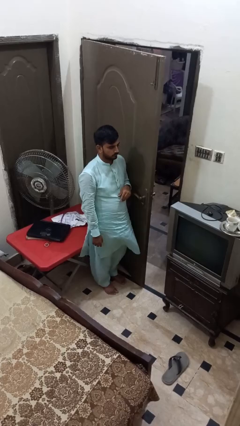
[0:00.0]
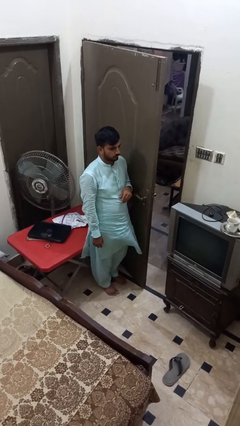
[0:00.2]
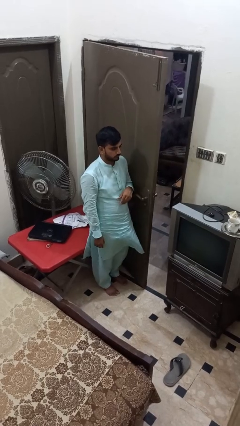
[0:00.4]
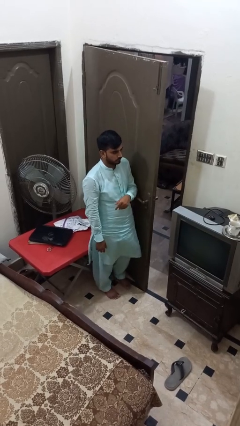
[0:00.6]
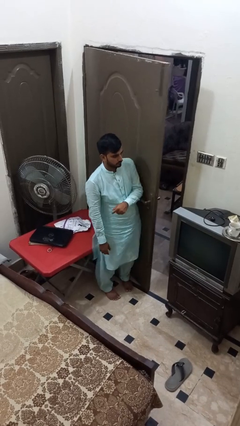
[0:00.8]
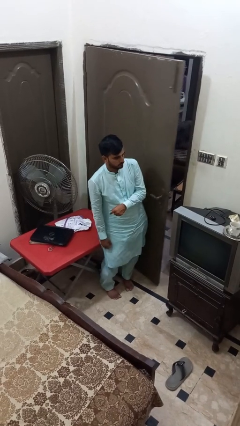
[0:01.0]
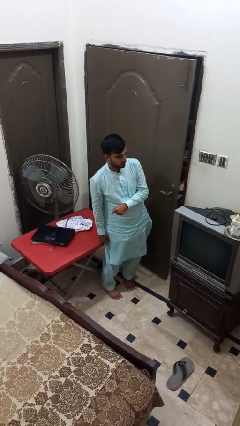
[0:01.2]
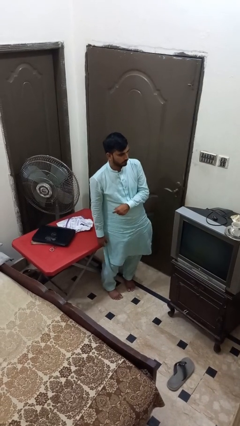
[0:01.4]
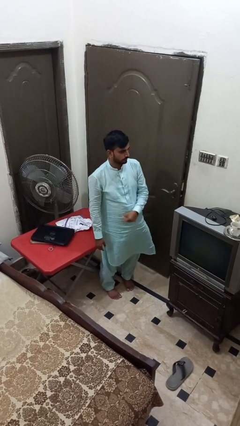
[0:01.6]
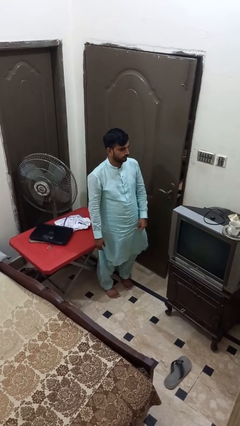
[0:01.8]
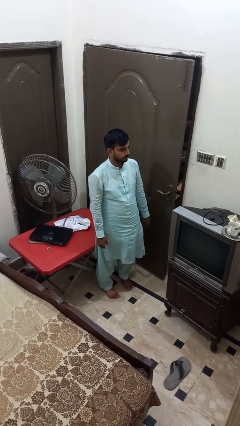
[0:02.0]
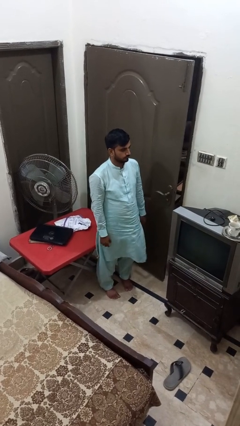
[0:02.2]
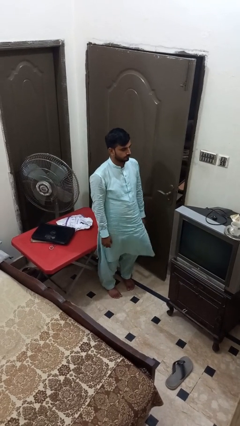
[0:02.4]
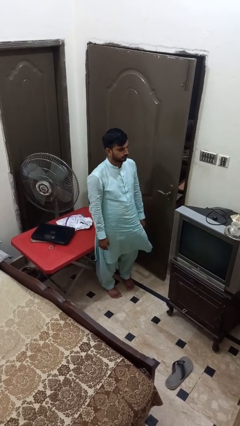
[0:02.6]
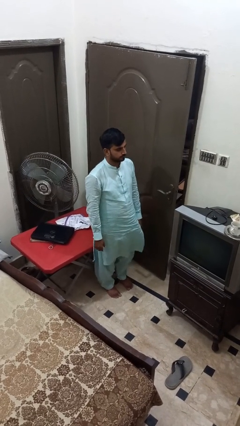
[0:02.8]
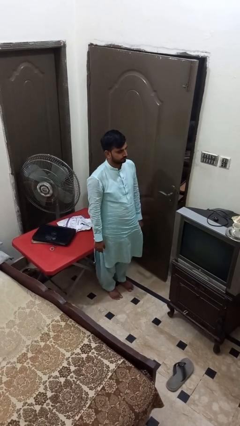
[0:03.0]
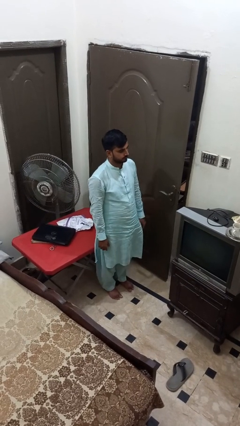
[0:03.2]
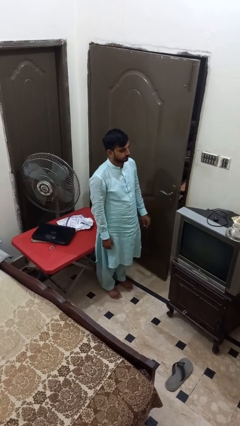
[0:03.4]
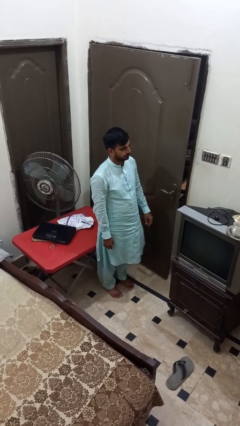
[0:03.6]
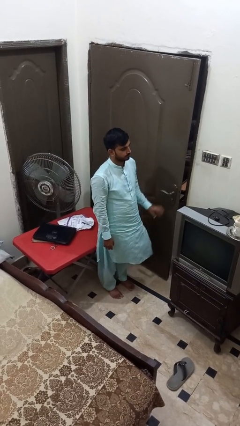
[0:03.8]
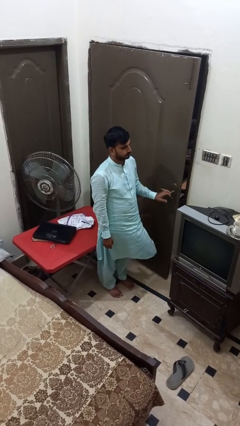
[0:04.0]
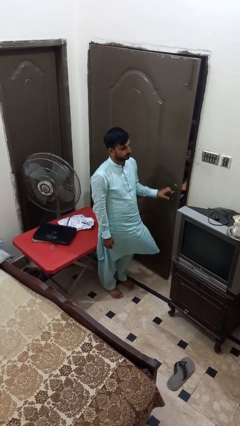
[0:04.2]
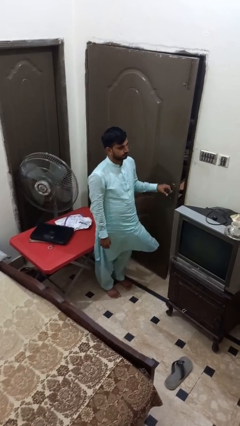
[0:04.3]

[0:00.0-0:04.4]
person closes door with hip

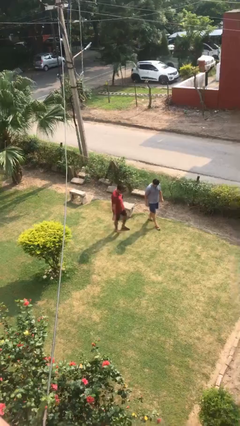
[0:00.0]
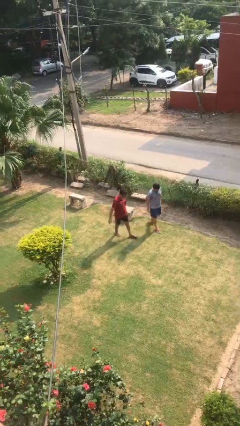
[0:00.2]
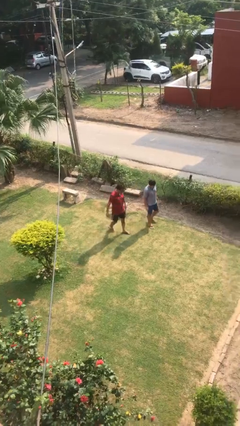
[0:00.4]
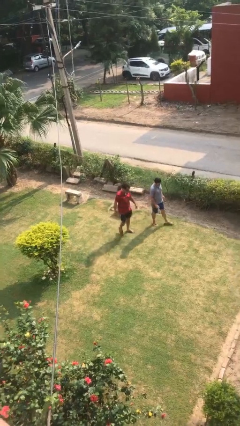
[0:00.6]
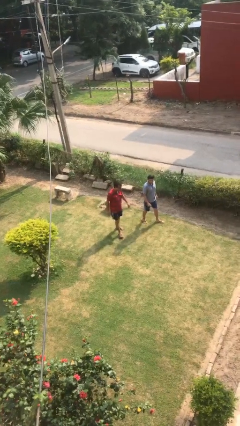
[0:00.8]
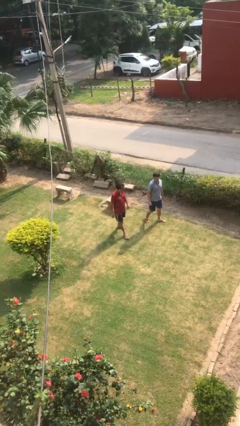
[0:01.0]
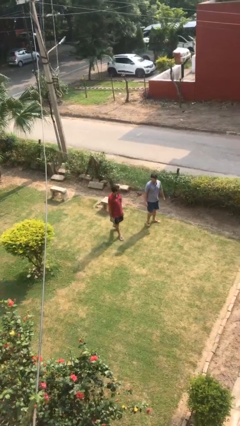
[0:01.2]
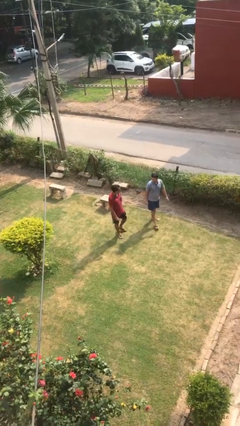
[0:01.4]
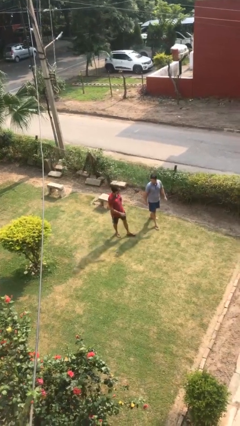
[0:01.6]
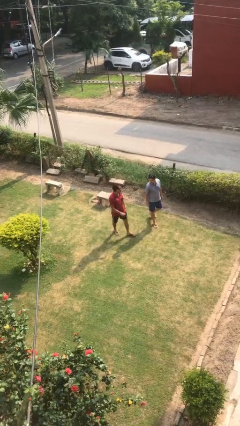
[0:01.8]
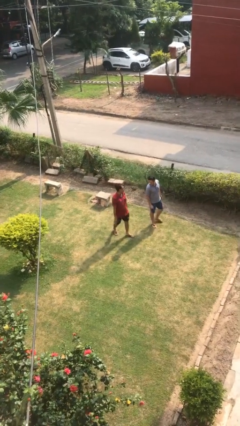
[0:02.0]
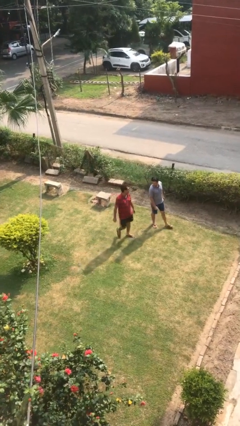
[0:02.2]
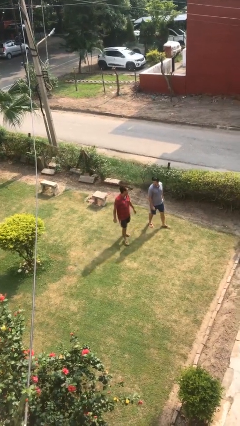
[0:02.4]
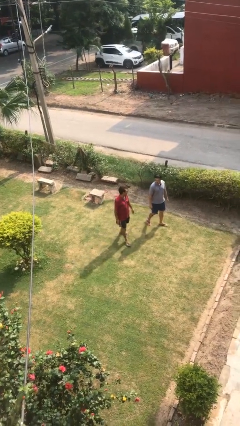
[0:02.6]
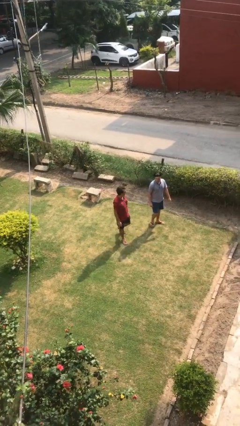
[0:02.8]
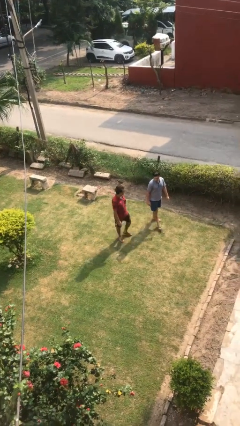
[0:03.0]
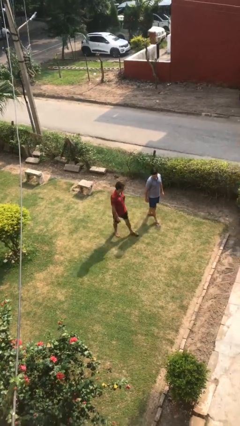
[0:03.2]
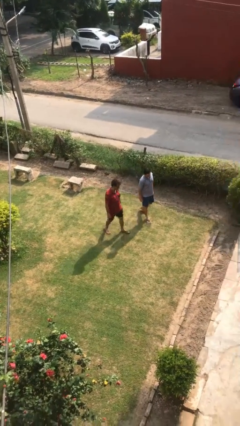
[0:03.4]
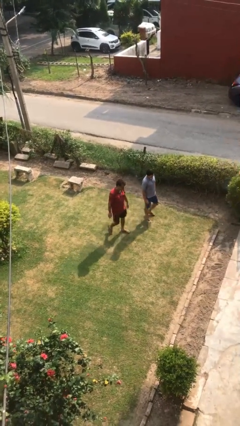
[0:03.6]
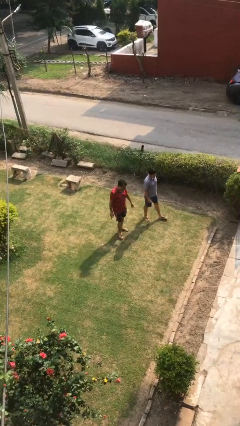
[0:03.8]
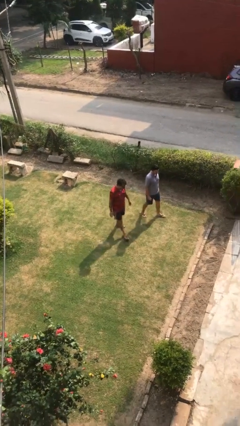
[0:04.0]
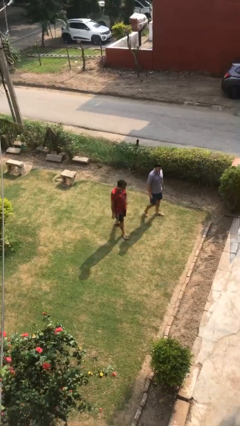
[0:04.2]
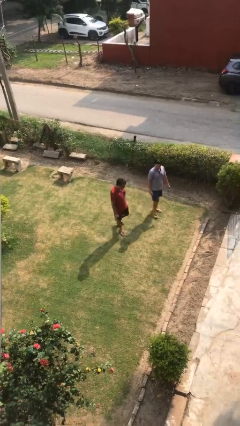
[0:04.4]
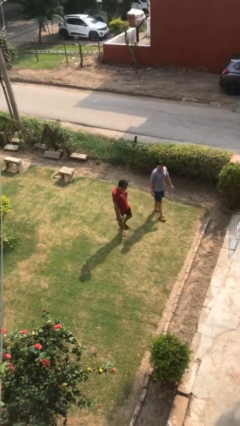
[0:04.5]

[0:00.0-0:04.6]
person talks to person

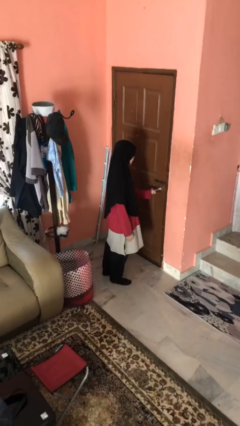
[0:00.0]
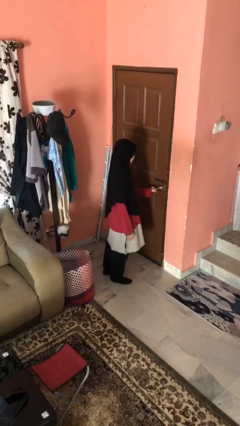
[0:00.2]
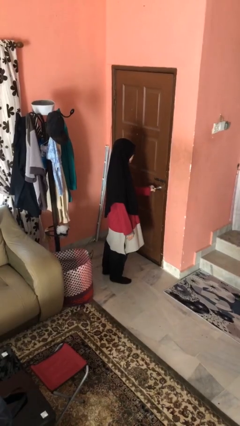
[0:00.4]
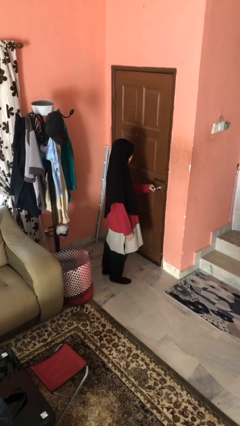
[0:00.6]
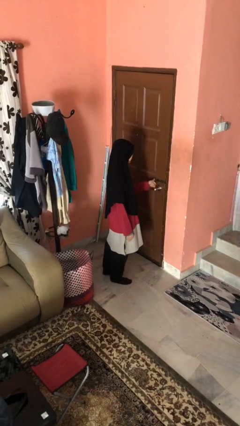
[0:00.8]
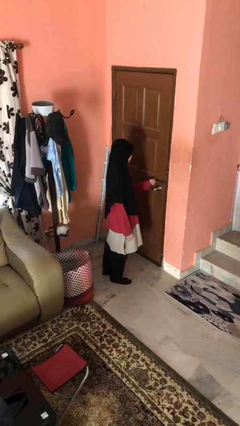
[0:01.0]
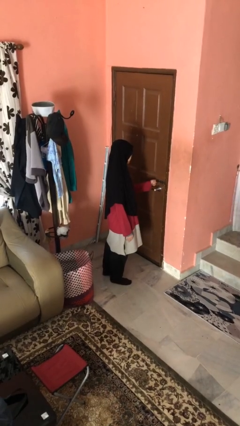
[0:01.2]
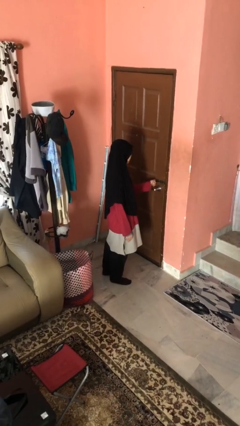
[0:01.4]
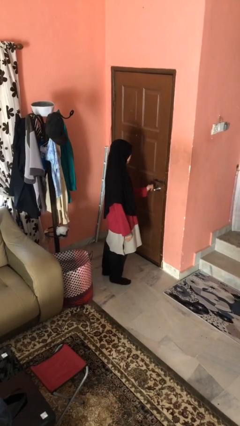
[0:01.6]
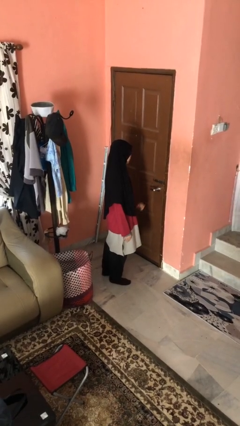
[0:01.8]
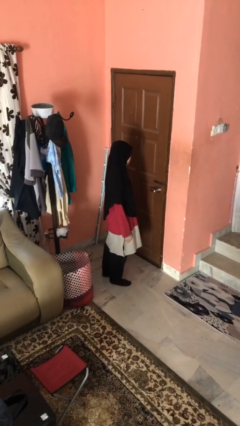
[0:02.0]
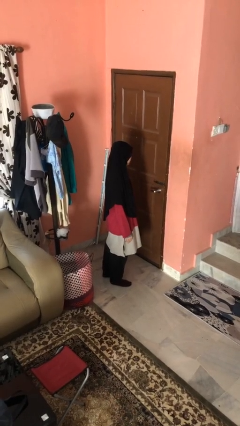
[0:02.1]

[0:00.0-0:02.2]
person locks door with keys

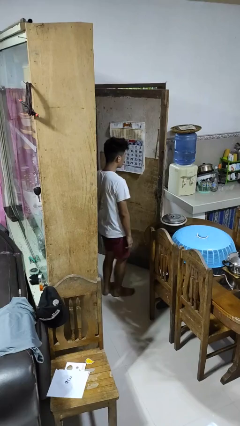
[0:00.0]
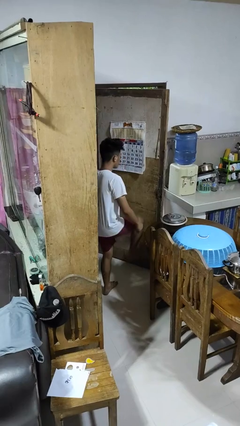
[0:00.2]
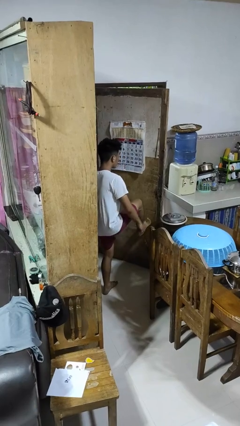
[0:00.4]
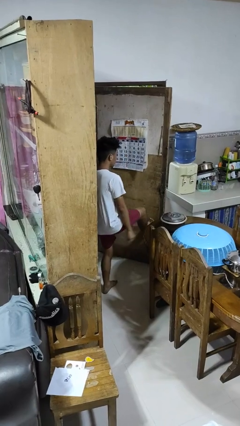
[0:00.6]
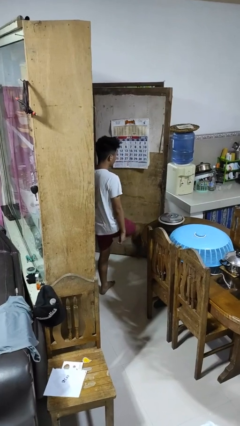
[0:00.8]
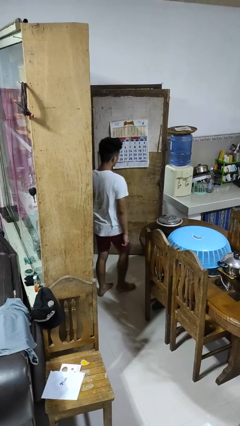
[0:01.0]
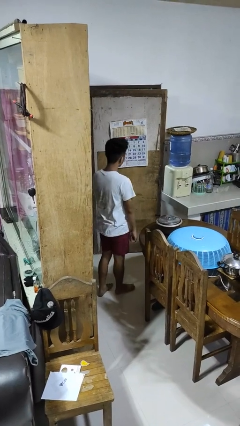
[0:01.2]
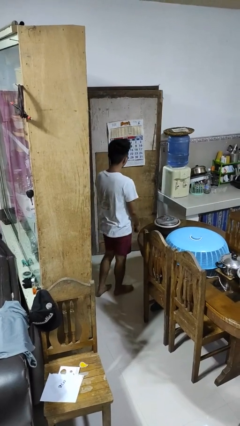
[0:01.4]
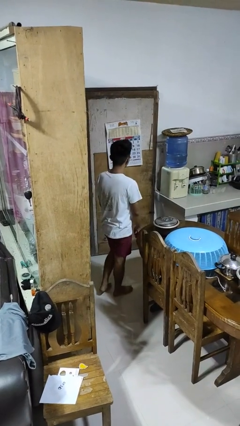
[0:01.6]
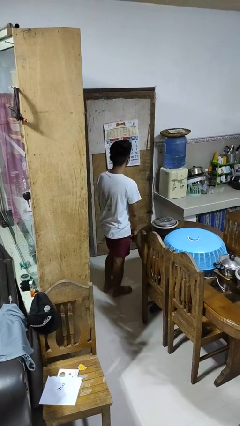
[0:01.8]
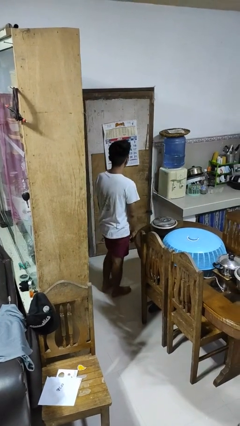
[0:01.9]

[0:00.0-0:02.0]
person closes door with foot

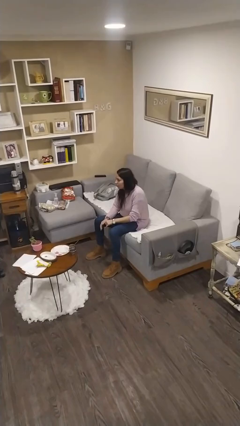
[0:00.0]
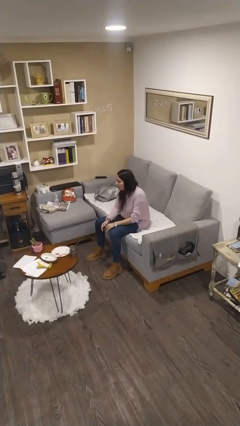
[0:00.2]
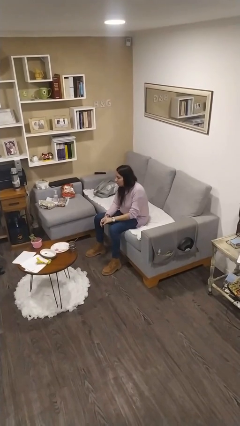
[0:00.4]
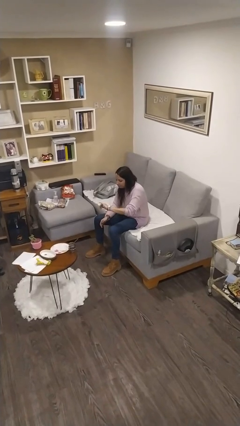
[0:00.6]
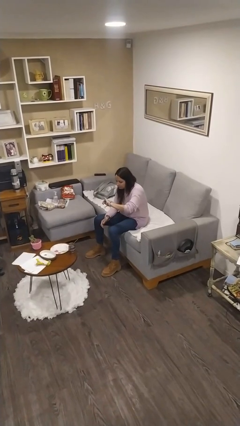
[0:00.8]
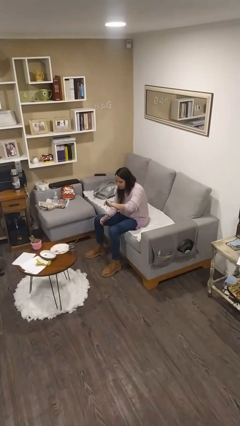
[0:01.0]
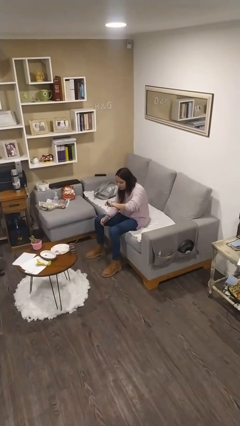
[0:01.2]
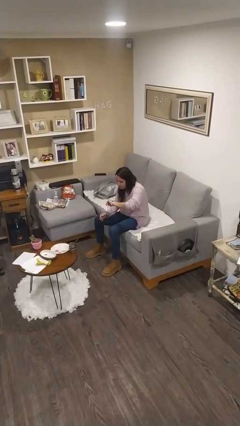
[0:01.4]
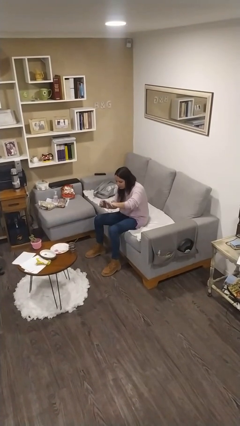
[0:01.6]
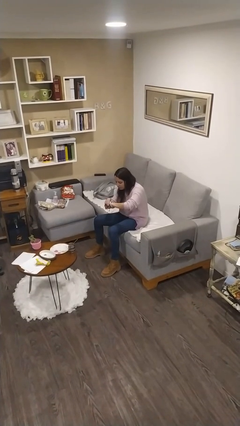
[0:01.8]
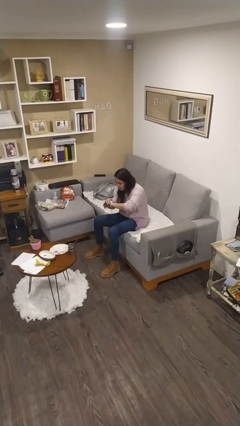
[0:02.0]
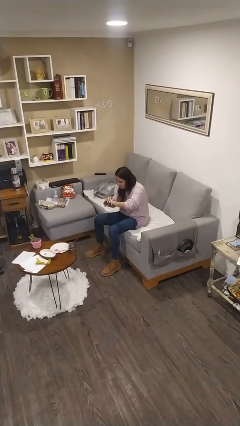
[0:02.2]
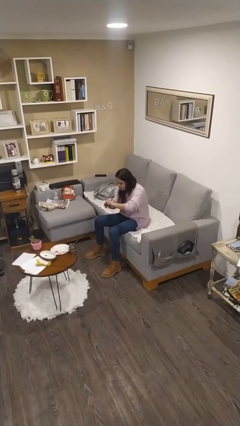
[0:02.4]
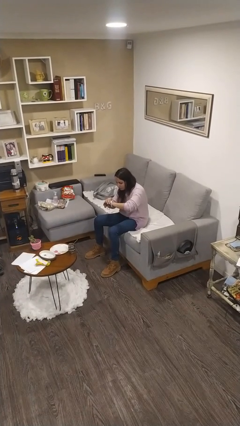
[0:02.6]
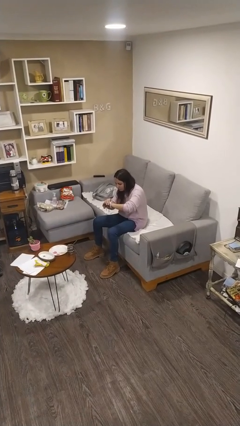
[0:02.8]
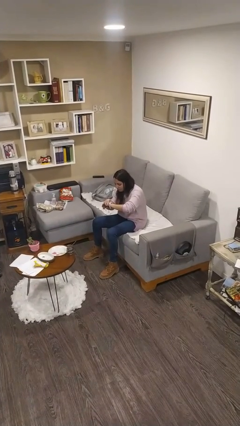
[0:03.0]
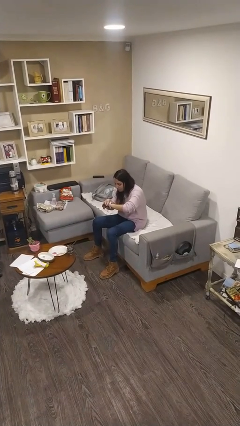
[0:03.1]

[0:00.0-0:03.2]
person looks at wristwatch

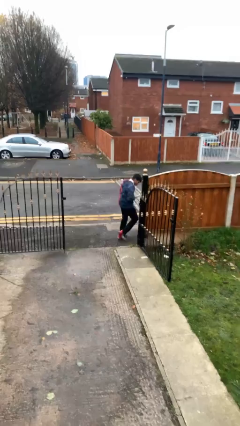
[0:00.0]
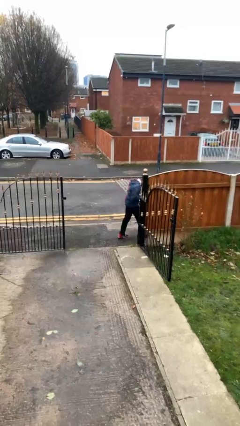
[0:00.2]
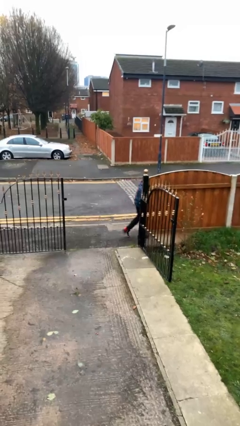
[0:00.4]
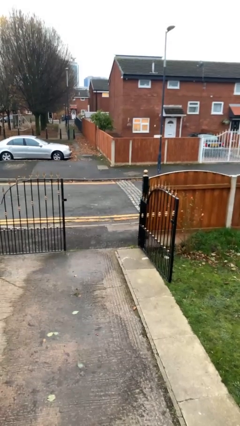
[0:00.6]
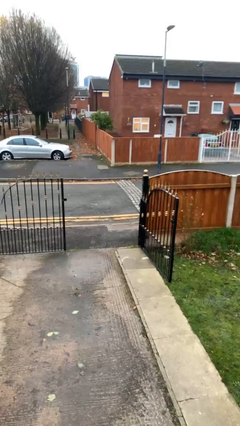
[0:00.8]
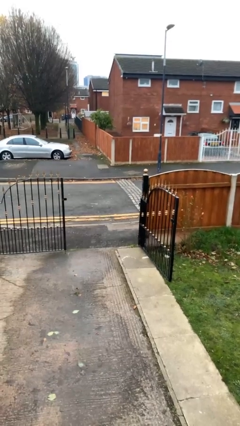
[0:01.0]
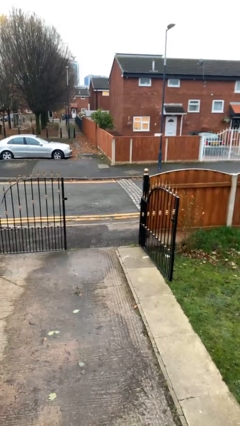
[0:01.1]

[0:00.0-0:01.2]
person exits scene through structure
